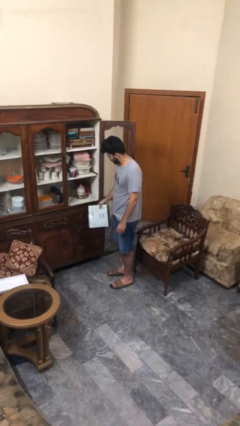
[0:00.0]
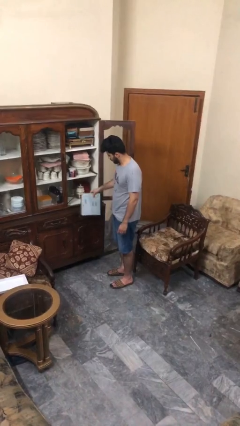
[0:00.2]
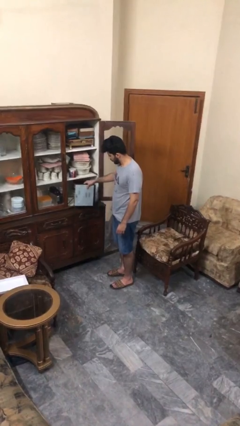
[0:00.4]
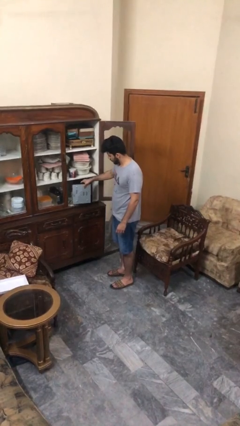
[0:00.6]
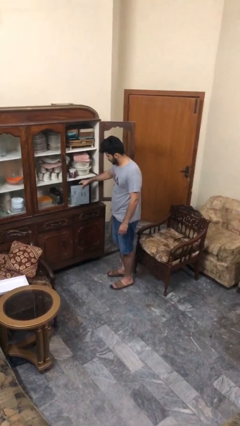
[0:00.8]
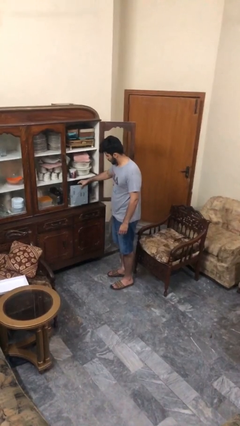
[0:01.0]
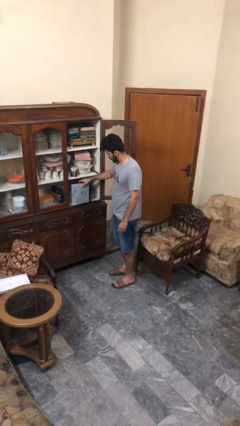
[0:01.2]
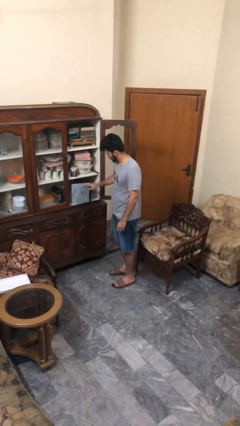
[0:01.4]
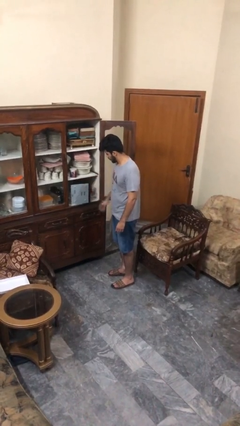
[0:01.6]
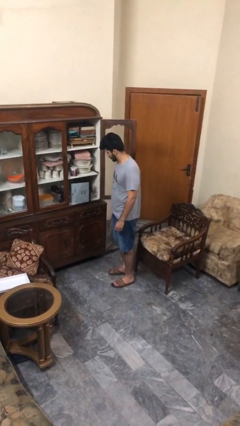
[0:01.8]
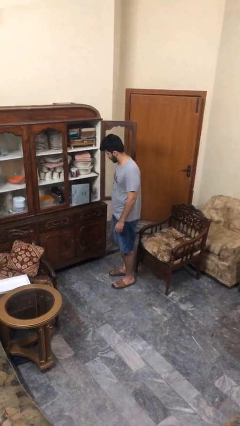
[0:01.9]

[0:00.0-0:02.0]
person puts down object into cabinet

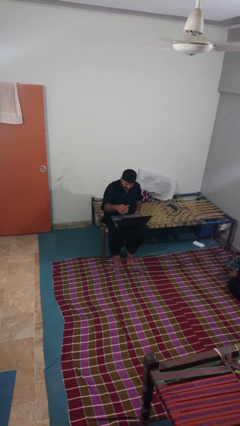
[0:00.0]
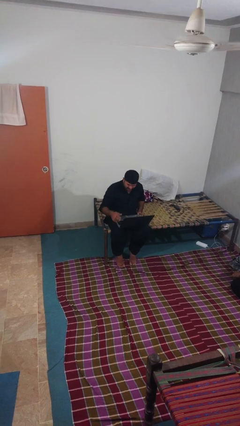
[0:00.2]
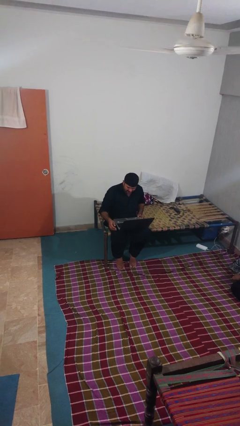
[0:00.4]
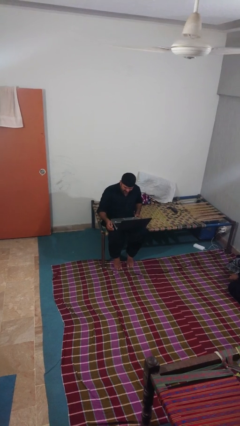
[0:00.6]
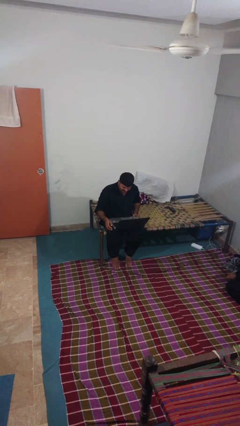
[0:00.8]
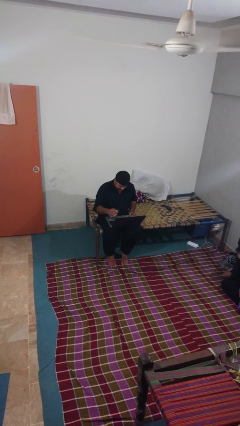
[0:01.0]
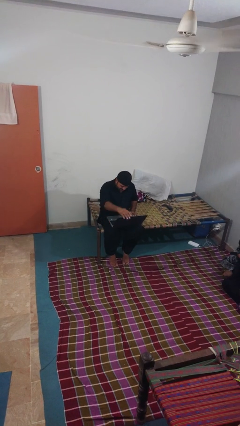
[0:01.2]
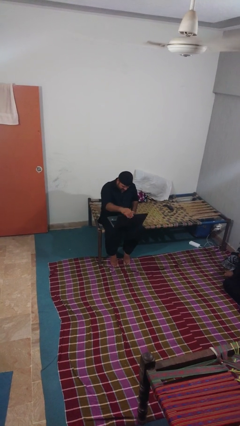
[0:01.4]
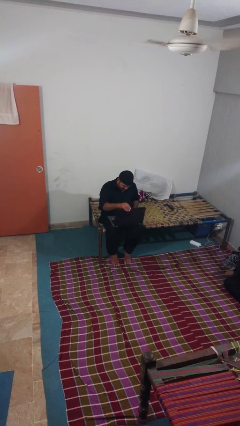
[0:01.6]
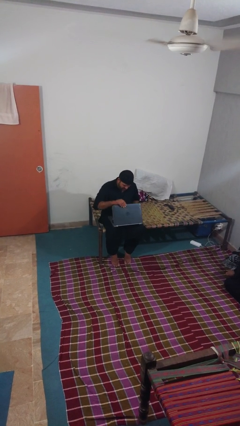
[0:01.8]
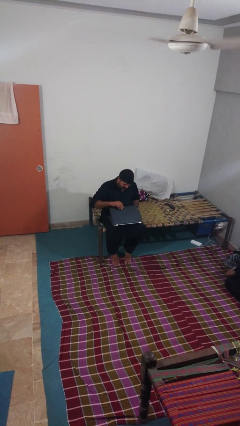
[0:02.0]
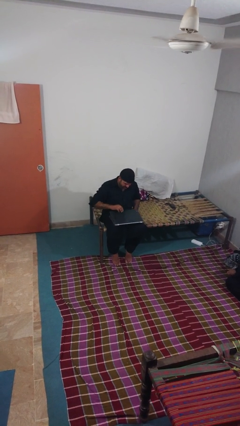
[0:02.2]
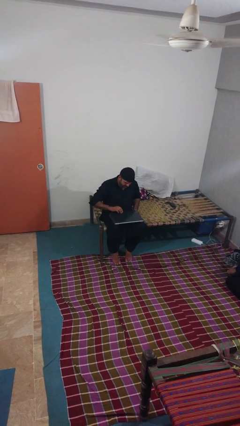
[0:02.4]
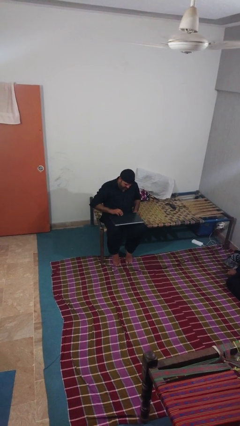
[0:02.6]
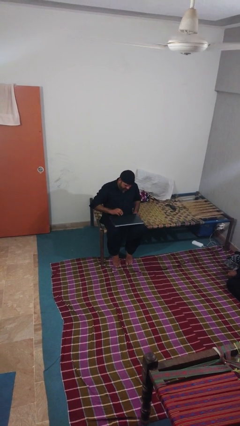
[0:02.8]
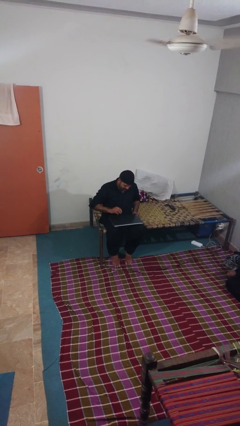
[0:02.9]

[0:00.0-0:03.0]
person closes laptop

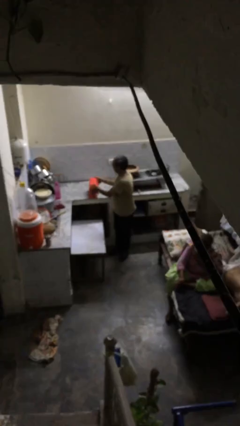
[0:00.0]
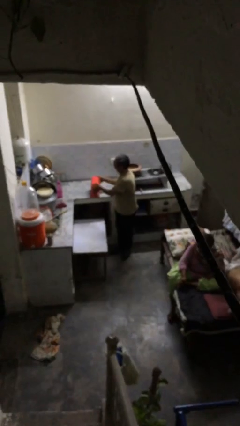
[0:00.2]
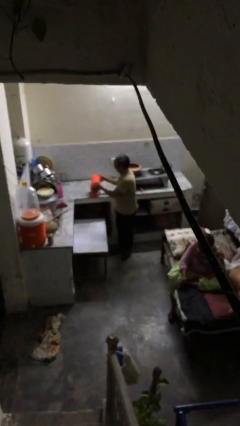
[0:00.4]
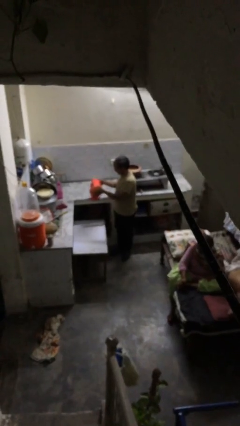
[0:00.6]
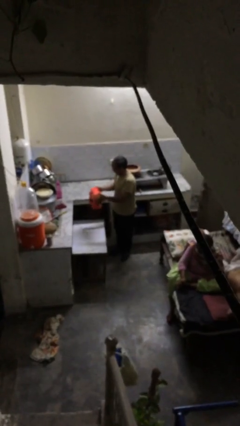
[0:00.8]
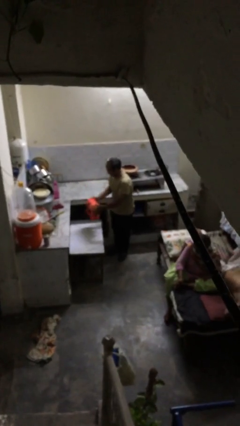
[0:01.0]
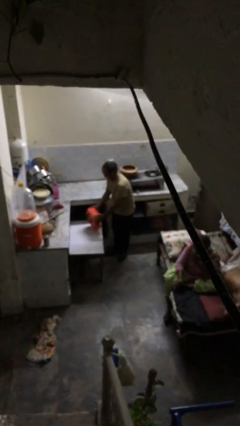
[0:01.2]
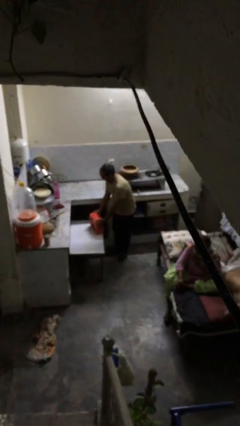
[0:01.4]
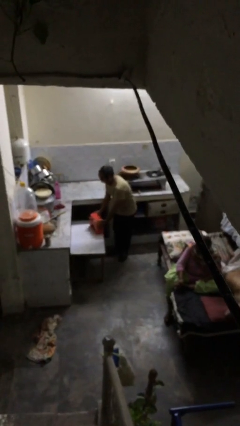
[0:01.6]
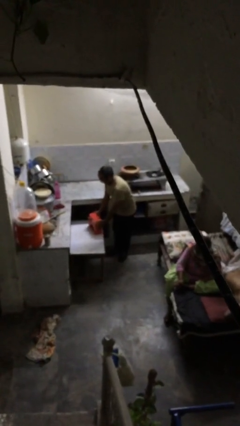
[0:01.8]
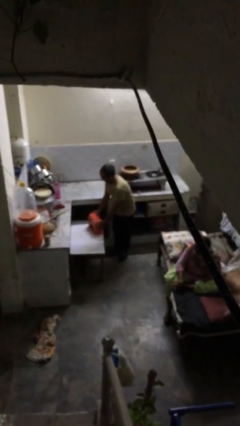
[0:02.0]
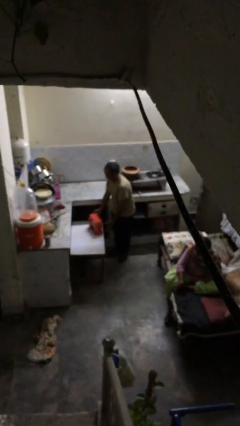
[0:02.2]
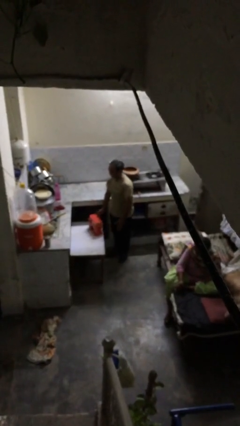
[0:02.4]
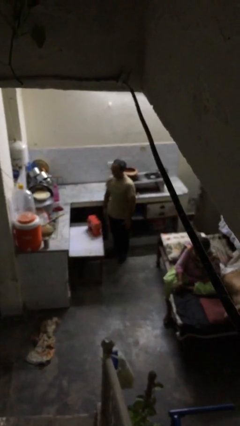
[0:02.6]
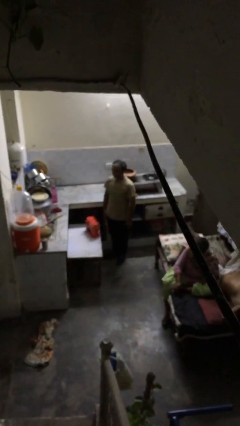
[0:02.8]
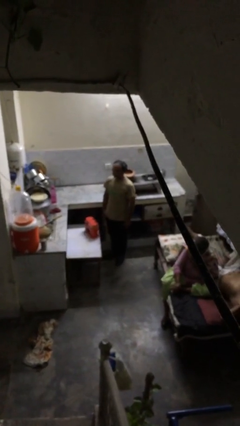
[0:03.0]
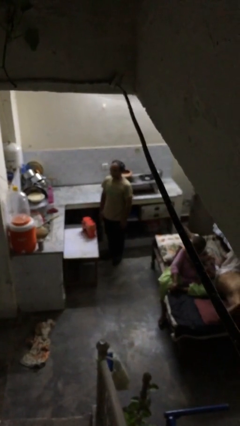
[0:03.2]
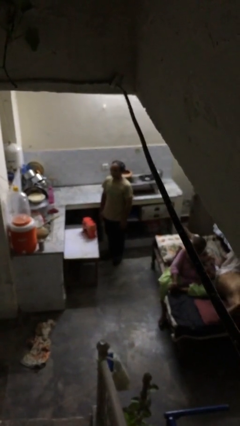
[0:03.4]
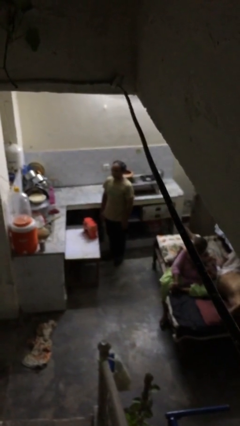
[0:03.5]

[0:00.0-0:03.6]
person puts down object on table

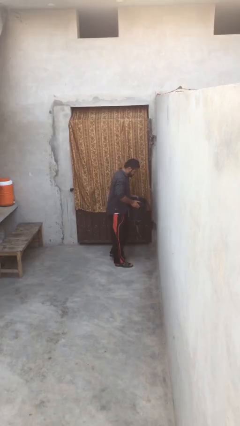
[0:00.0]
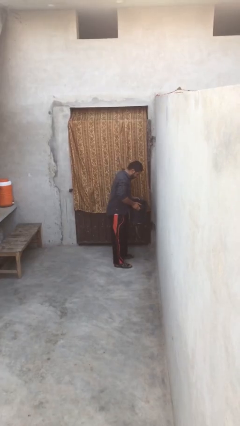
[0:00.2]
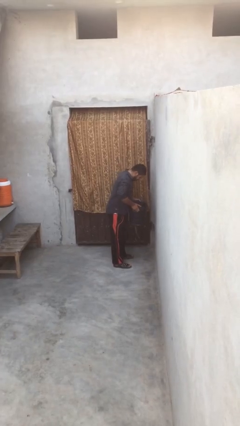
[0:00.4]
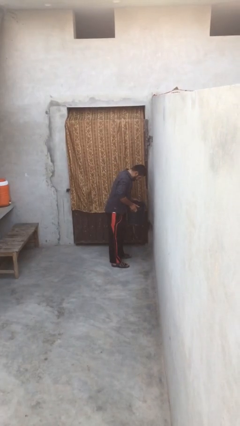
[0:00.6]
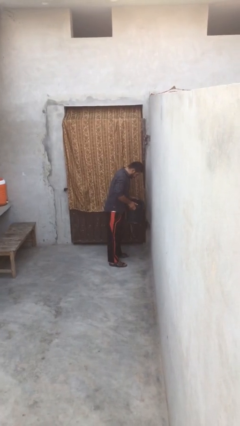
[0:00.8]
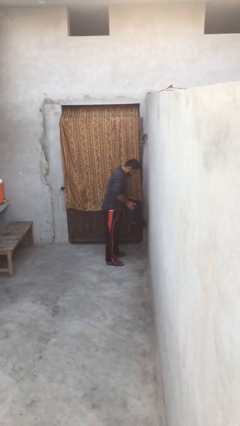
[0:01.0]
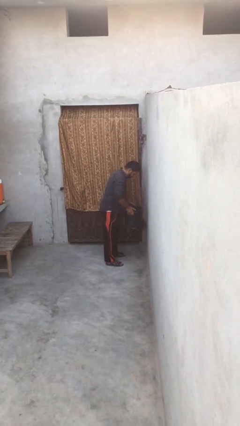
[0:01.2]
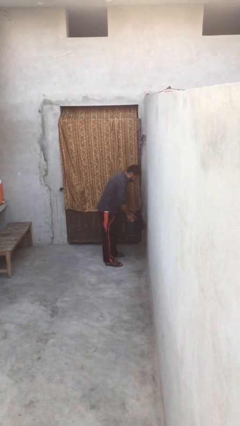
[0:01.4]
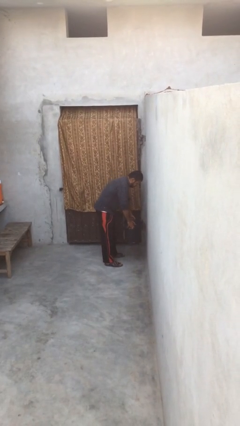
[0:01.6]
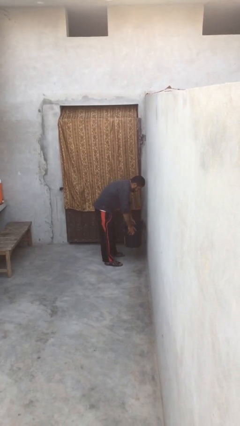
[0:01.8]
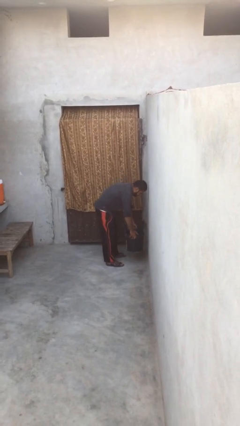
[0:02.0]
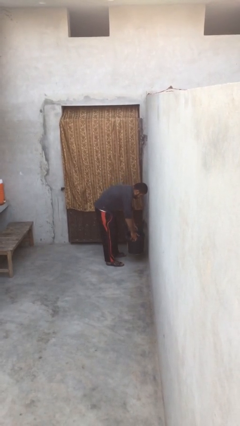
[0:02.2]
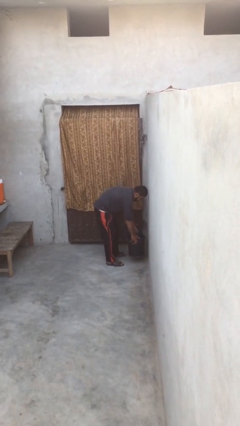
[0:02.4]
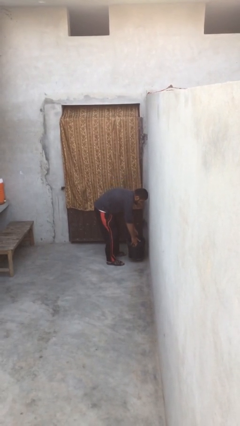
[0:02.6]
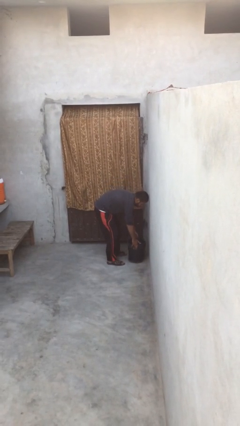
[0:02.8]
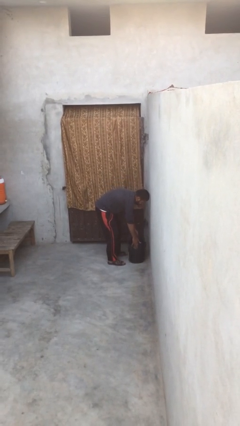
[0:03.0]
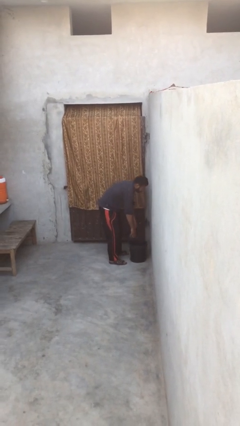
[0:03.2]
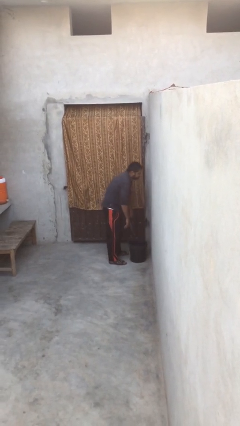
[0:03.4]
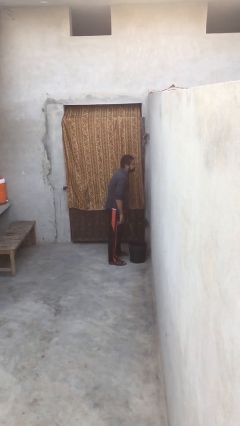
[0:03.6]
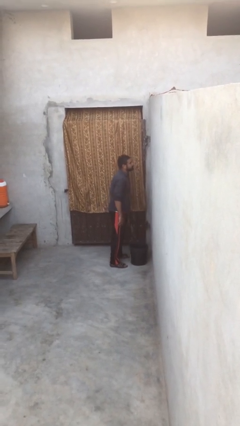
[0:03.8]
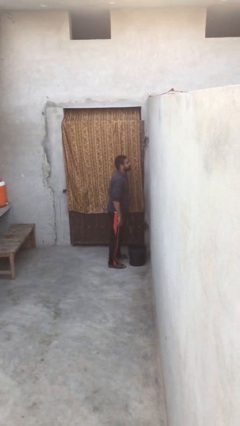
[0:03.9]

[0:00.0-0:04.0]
person puts down object on floor

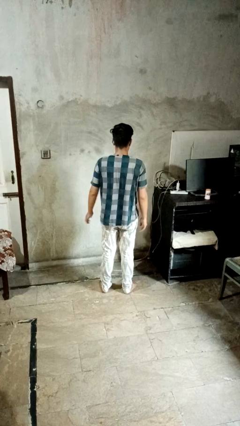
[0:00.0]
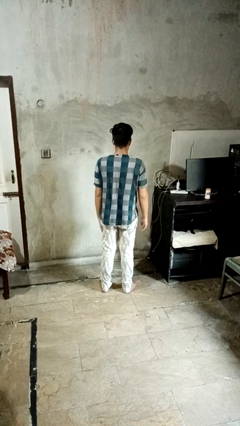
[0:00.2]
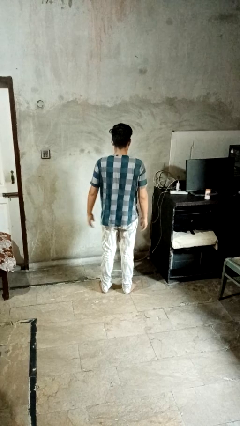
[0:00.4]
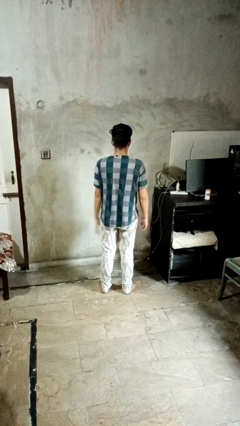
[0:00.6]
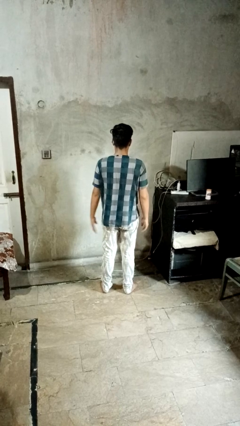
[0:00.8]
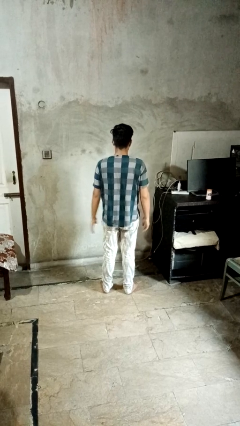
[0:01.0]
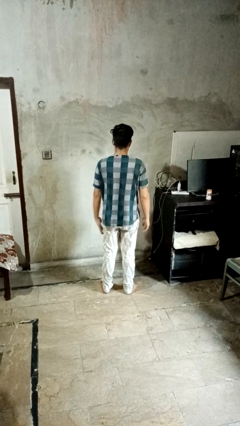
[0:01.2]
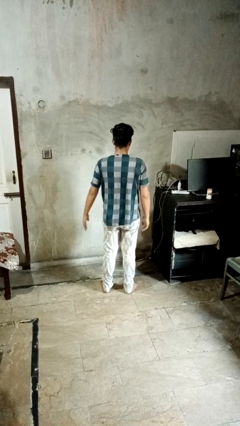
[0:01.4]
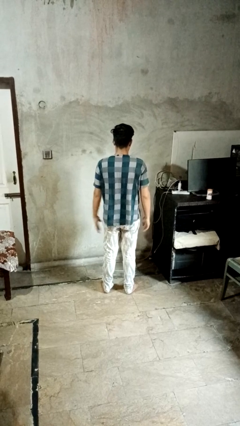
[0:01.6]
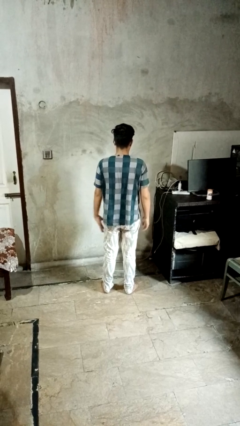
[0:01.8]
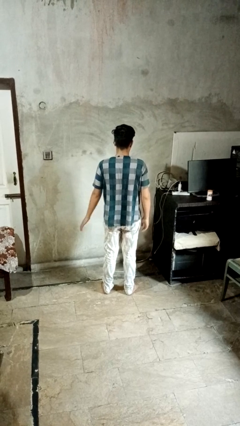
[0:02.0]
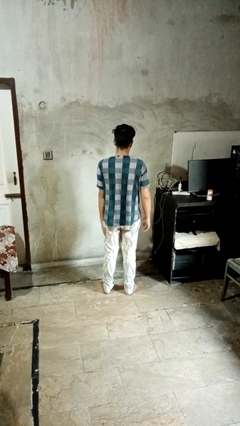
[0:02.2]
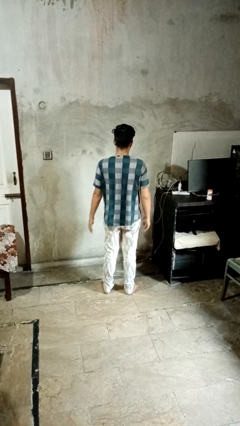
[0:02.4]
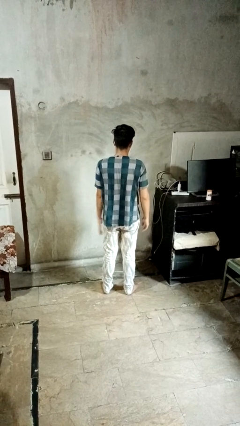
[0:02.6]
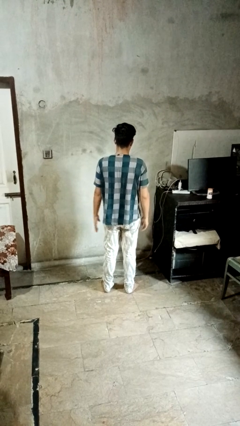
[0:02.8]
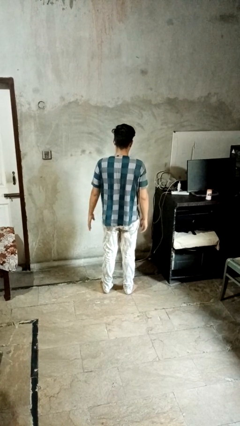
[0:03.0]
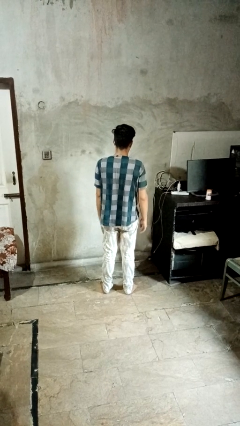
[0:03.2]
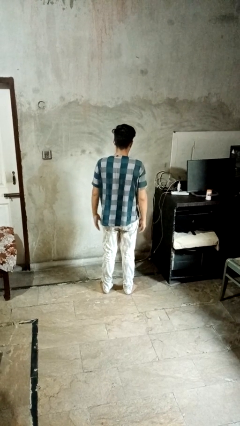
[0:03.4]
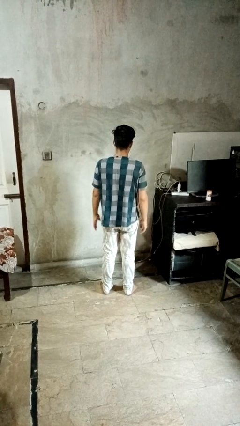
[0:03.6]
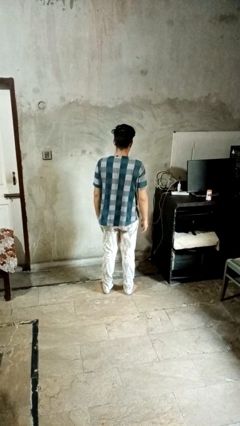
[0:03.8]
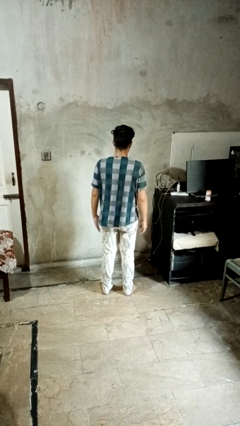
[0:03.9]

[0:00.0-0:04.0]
person slaps hands on thighs

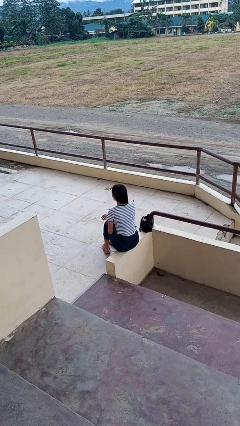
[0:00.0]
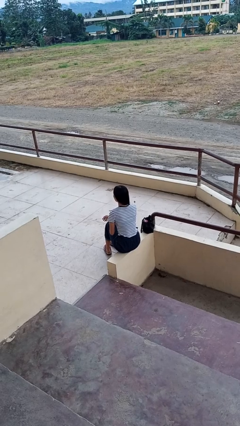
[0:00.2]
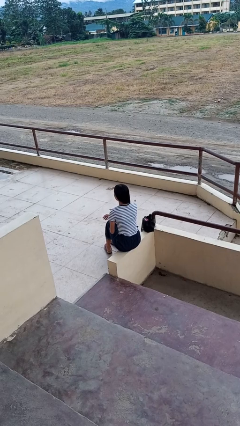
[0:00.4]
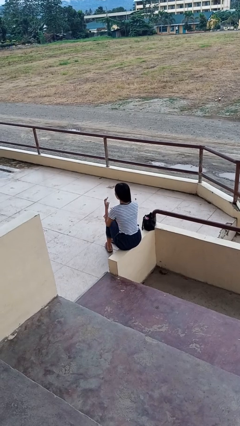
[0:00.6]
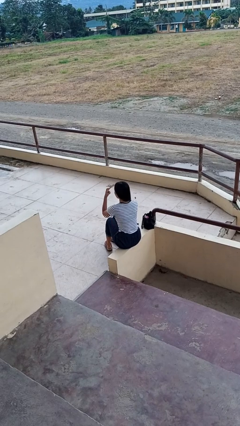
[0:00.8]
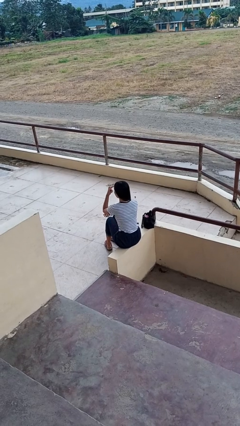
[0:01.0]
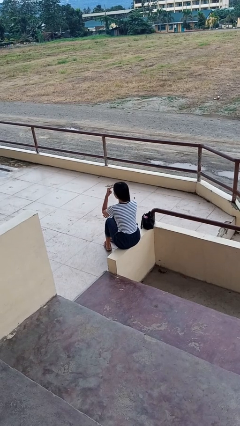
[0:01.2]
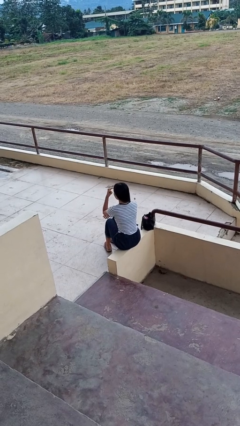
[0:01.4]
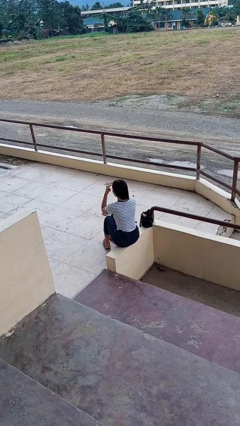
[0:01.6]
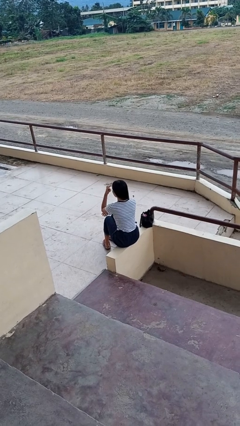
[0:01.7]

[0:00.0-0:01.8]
person gestures watch closely
